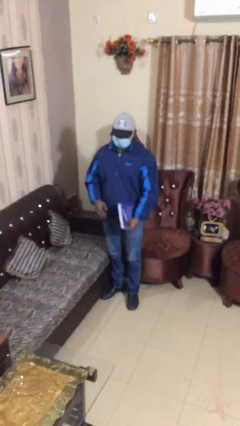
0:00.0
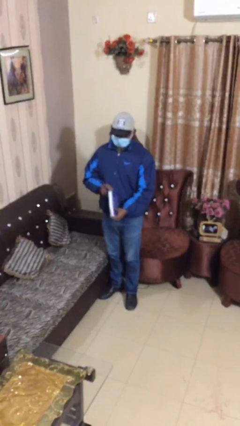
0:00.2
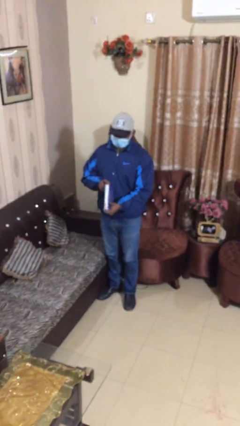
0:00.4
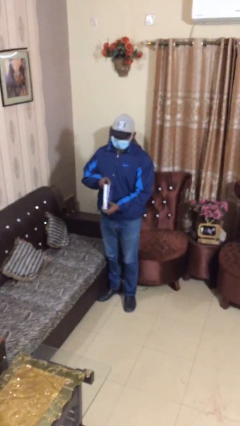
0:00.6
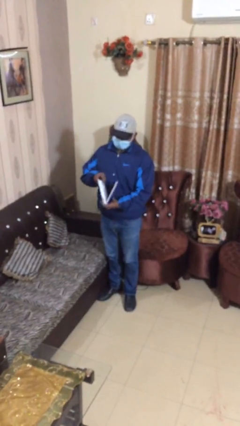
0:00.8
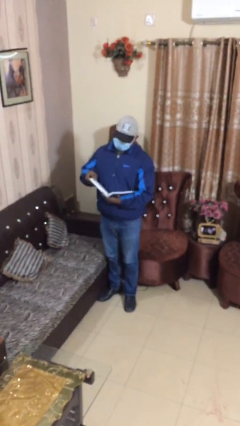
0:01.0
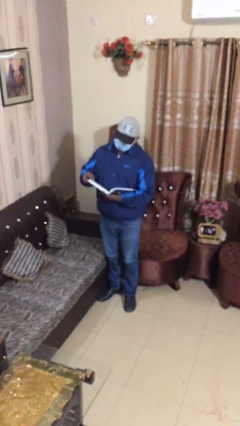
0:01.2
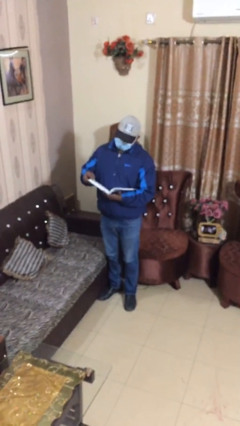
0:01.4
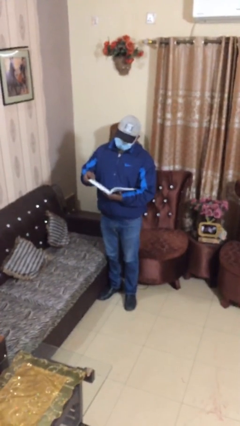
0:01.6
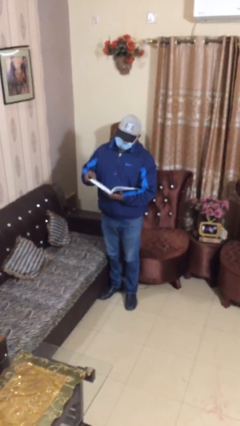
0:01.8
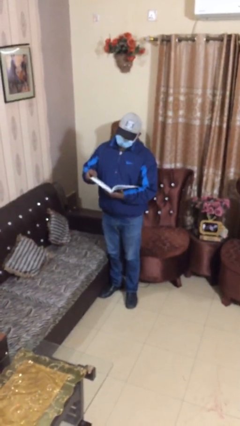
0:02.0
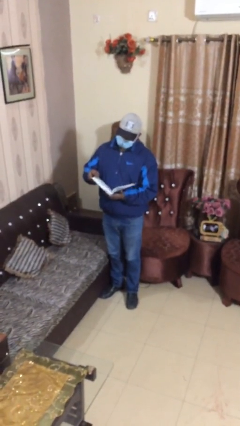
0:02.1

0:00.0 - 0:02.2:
person reads document

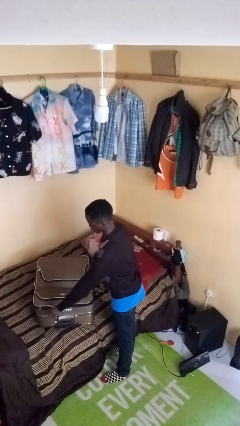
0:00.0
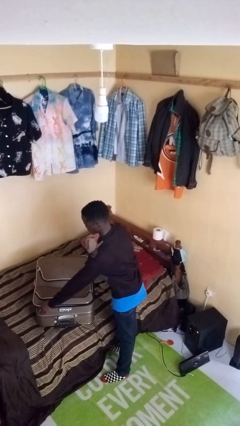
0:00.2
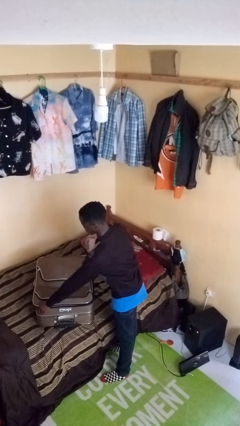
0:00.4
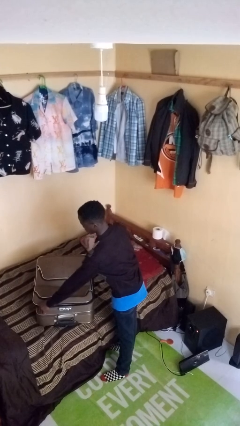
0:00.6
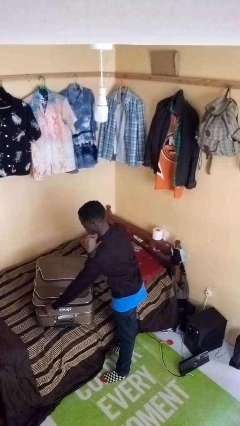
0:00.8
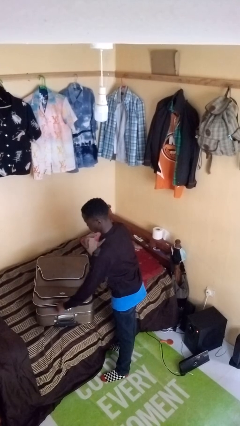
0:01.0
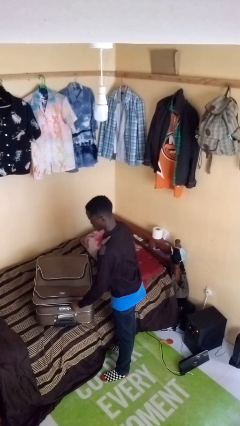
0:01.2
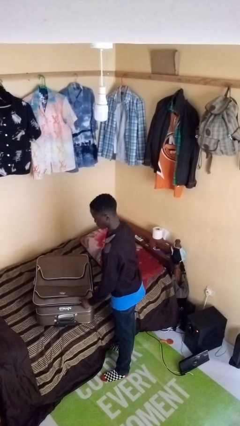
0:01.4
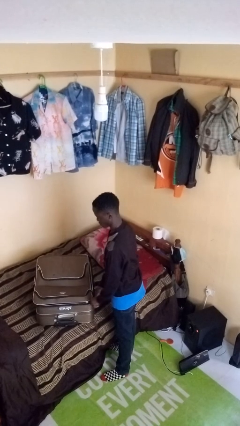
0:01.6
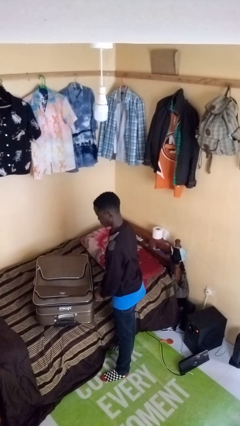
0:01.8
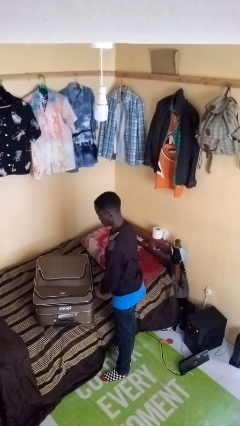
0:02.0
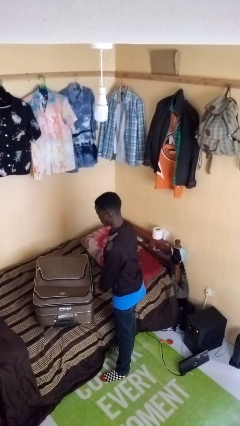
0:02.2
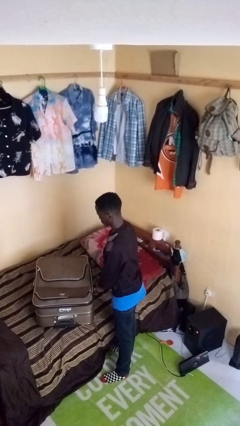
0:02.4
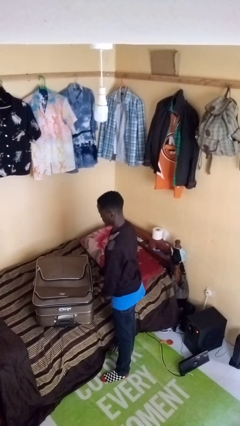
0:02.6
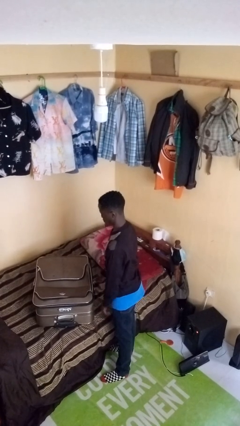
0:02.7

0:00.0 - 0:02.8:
person closes suitcase

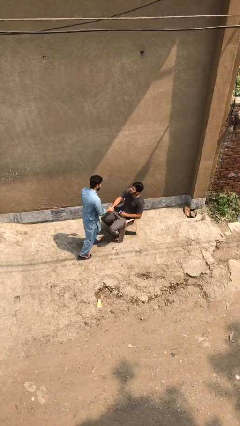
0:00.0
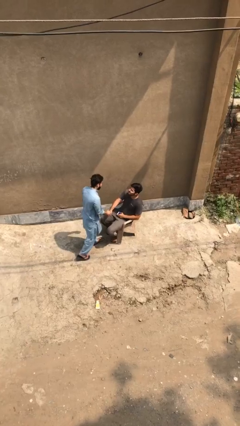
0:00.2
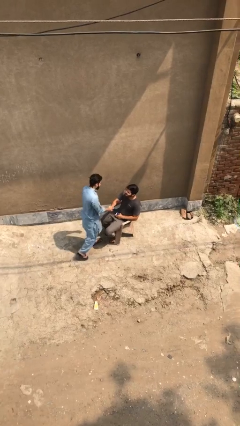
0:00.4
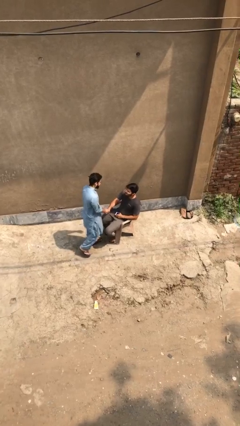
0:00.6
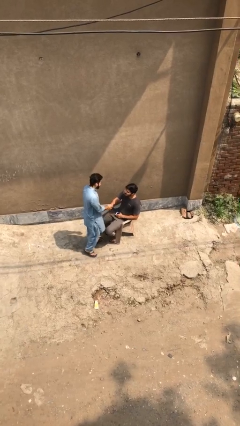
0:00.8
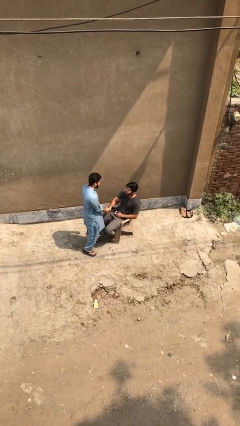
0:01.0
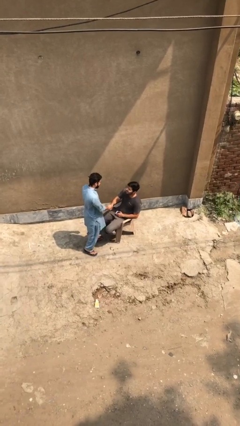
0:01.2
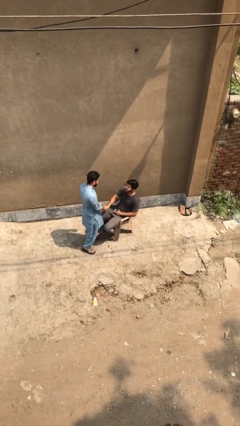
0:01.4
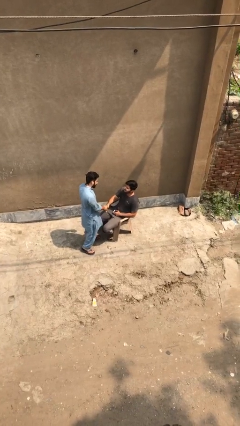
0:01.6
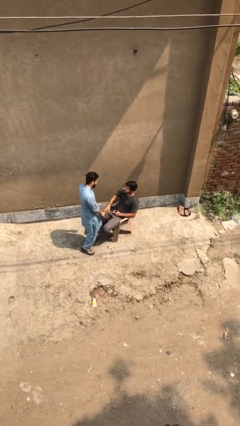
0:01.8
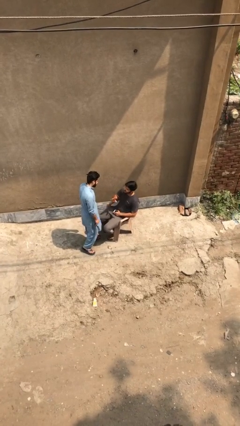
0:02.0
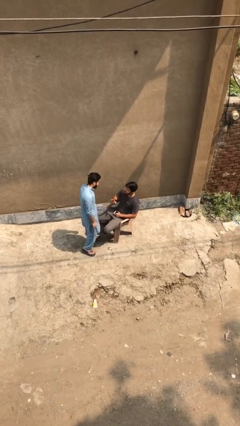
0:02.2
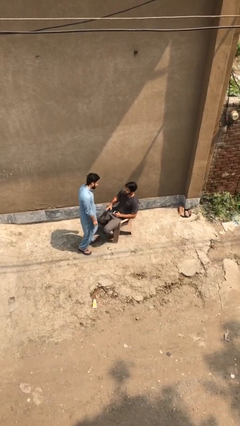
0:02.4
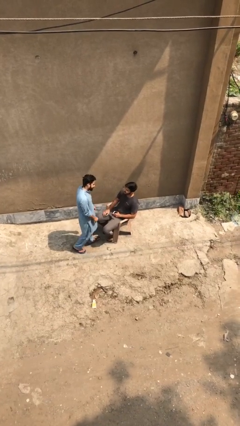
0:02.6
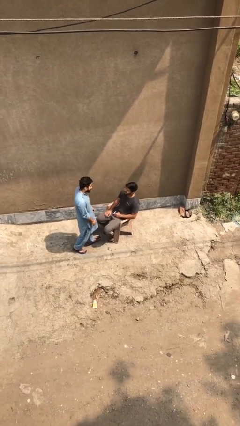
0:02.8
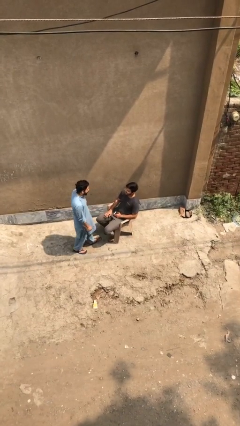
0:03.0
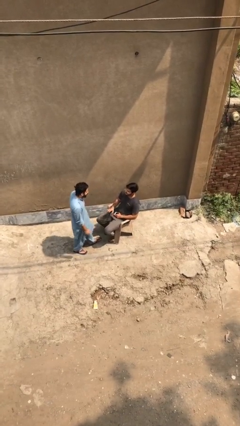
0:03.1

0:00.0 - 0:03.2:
person shakes hand

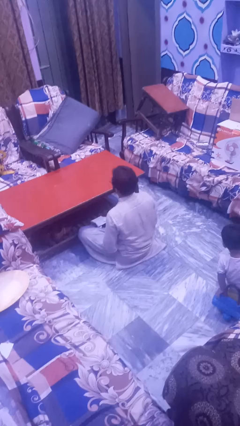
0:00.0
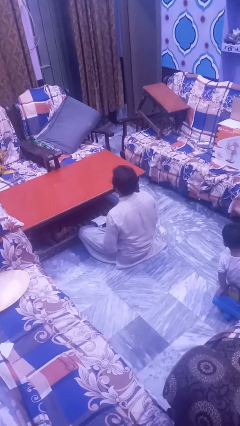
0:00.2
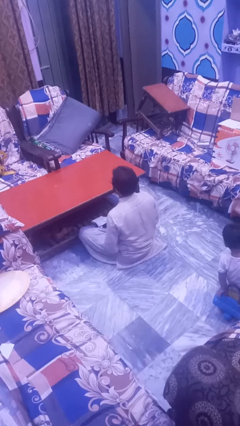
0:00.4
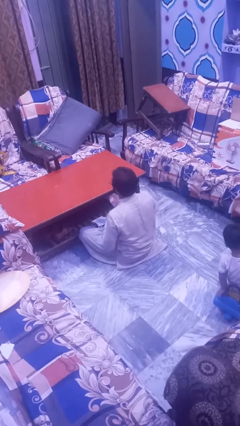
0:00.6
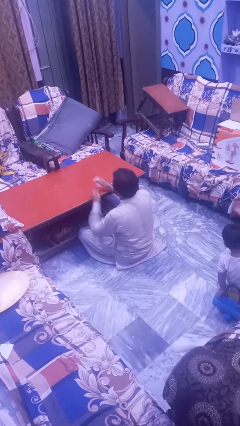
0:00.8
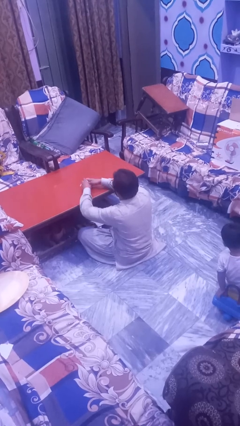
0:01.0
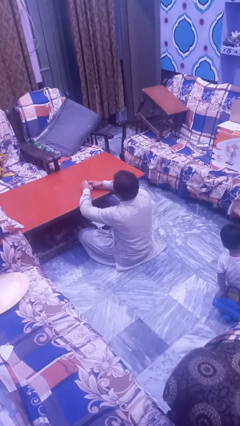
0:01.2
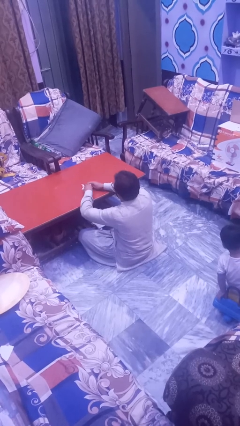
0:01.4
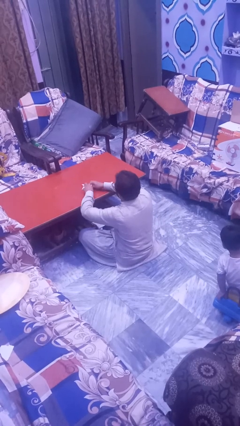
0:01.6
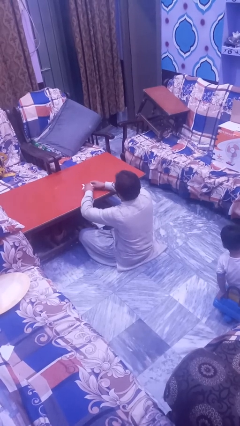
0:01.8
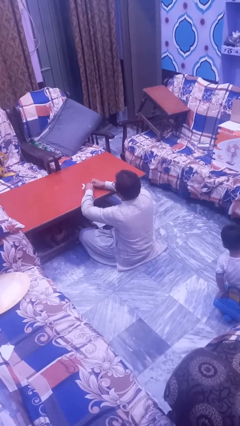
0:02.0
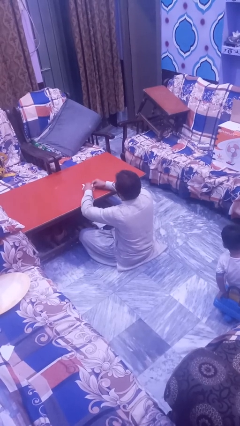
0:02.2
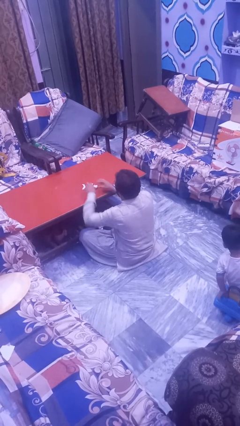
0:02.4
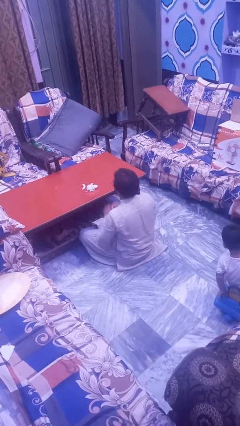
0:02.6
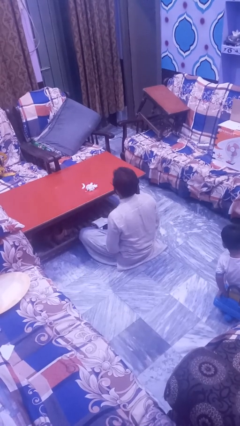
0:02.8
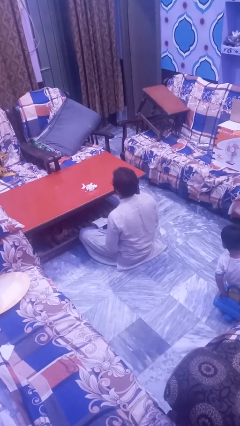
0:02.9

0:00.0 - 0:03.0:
person crumples paper

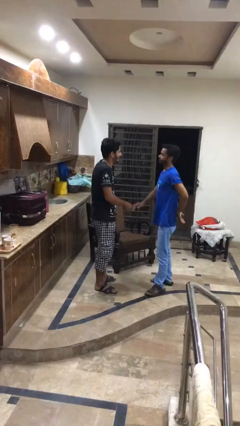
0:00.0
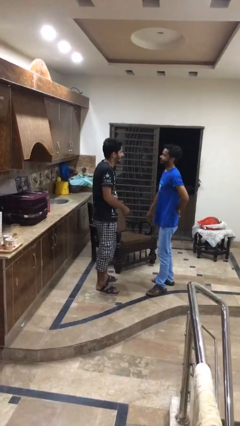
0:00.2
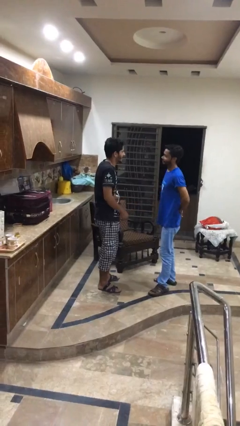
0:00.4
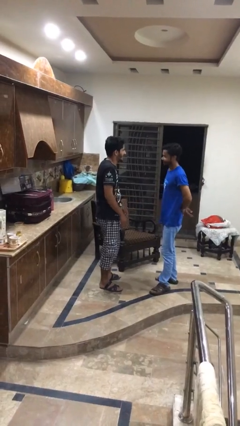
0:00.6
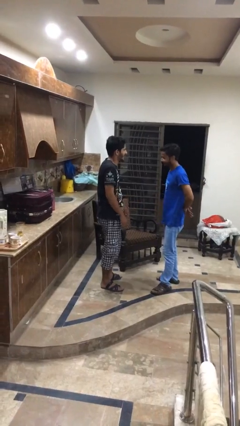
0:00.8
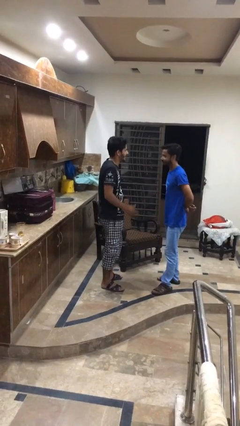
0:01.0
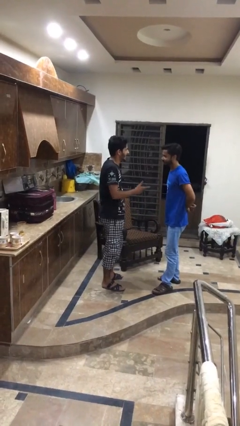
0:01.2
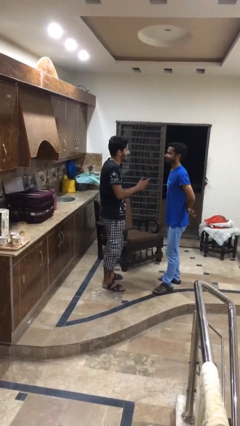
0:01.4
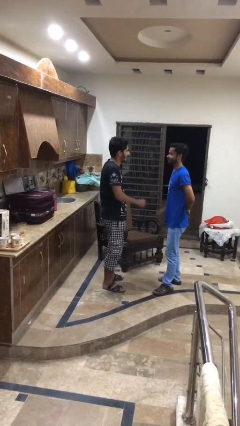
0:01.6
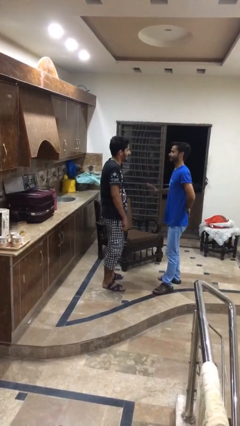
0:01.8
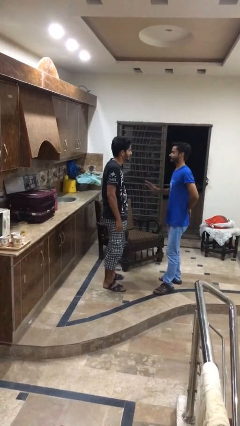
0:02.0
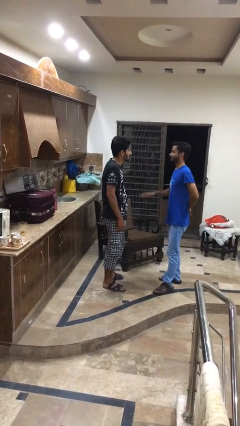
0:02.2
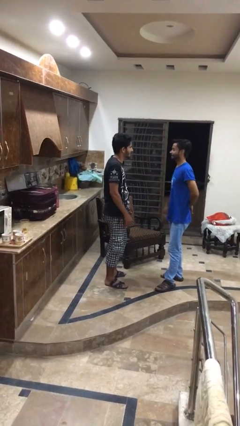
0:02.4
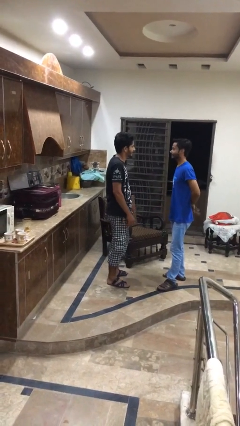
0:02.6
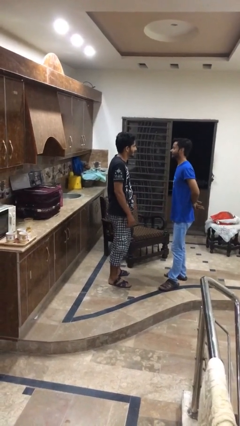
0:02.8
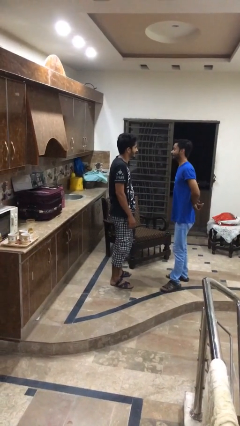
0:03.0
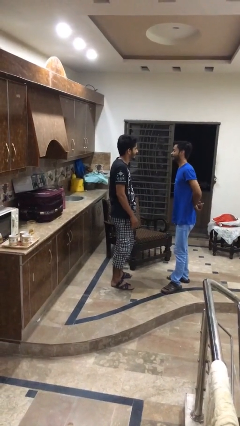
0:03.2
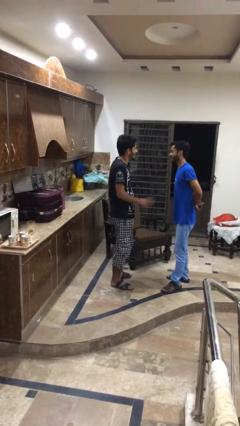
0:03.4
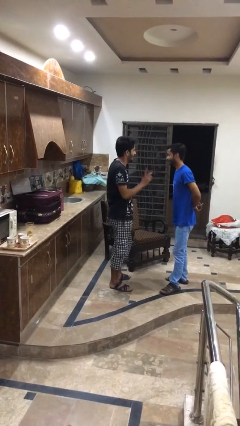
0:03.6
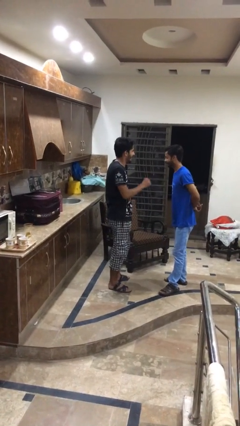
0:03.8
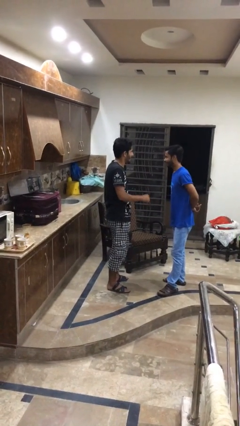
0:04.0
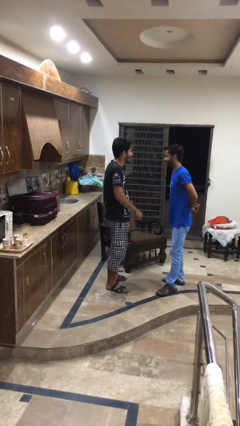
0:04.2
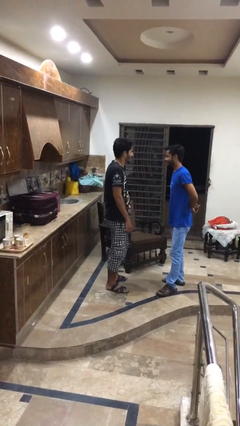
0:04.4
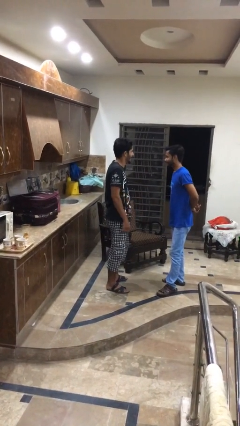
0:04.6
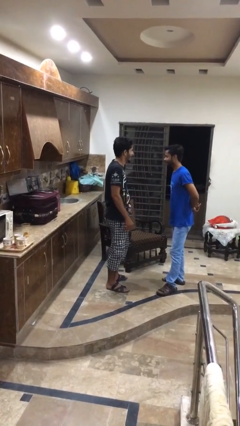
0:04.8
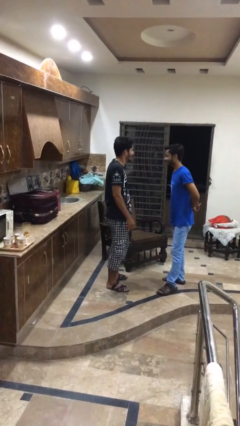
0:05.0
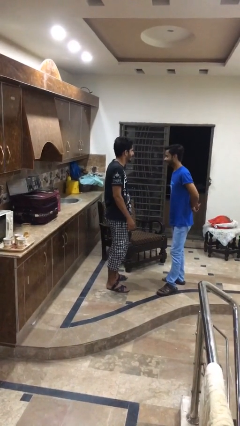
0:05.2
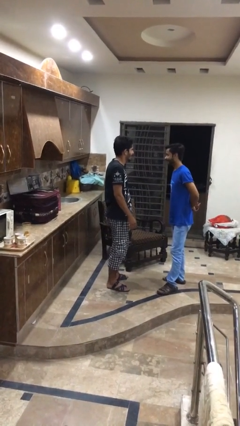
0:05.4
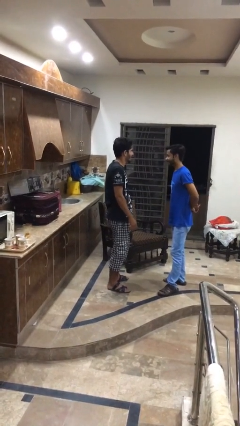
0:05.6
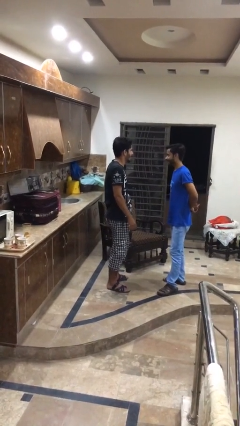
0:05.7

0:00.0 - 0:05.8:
person talks to person

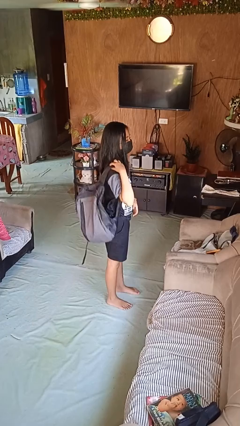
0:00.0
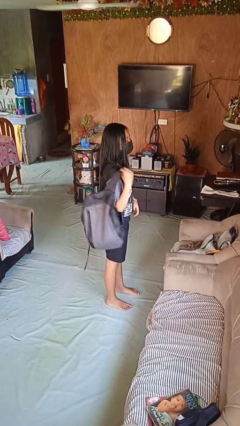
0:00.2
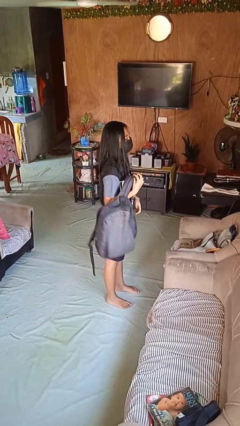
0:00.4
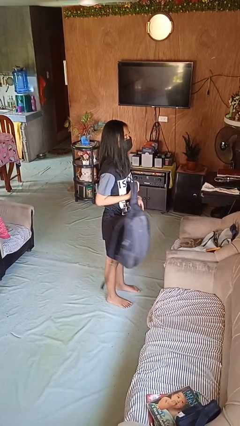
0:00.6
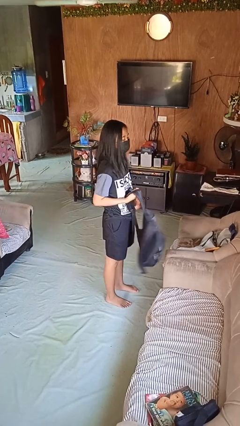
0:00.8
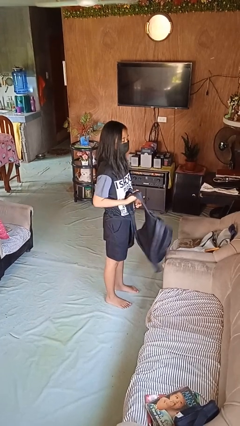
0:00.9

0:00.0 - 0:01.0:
person takes off backpack
